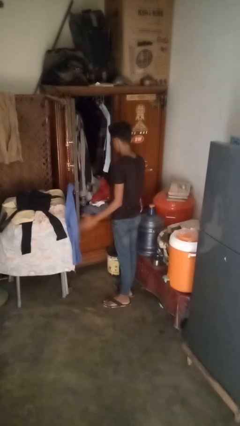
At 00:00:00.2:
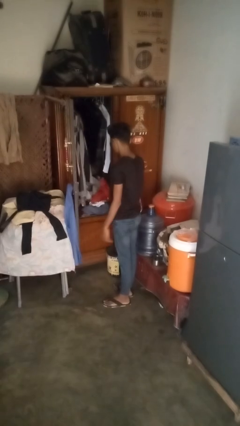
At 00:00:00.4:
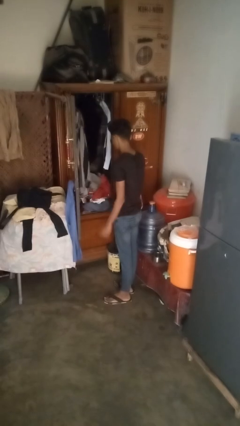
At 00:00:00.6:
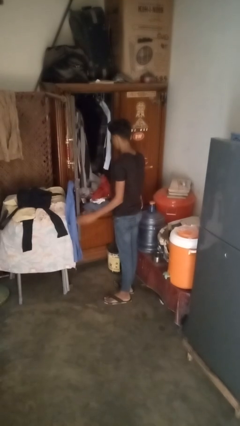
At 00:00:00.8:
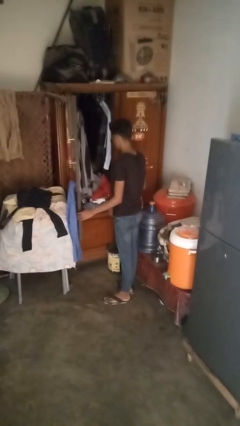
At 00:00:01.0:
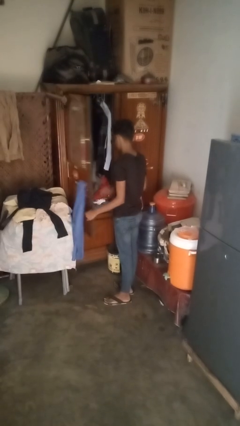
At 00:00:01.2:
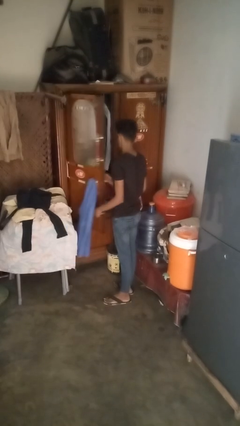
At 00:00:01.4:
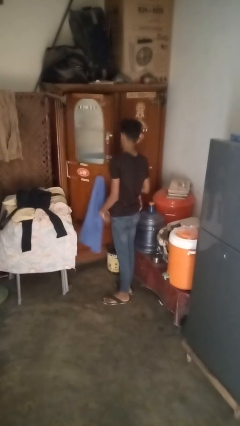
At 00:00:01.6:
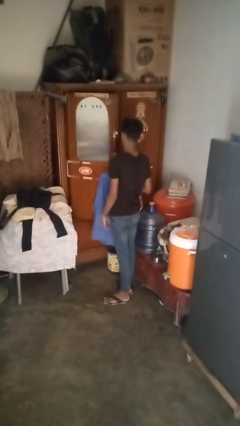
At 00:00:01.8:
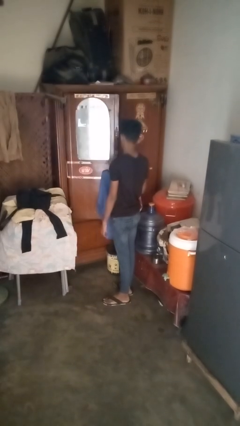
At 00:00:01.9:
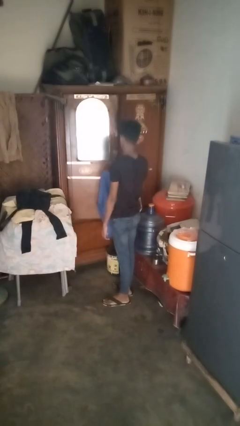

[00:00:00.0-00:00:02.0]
person closes dresser drawer

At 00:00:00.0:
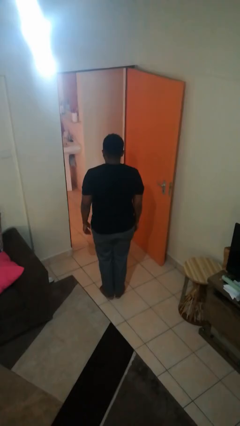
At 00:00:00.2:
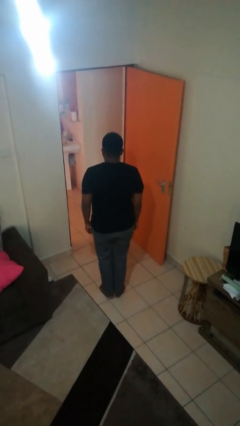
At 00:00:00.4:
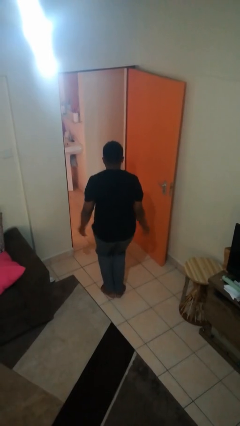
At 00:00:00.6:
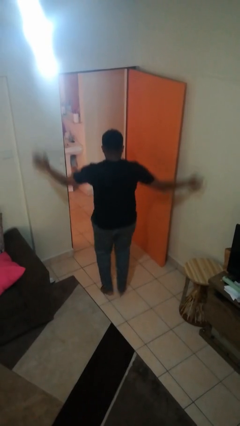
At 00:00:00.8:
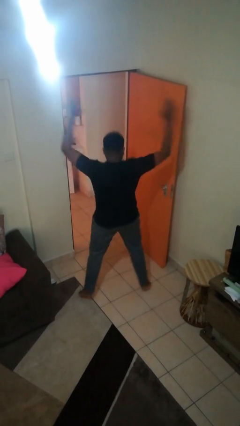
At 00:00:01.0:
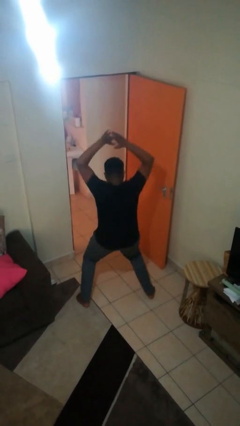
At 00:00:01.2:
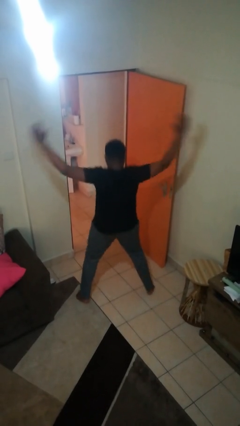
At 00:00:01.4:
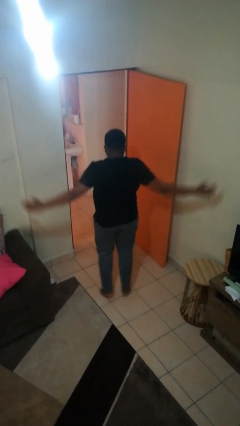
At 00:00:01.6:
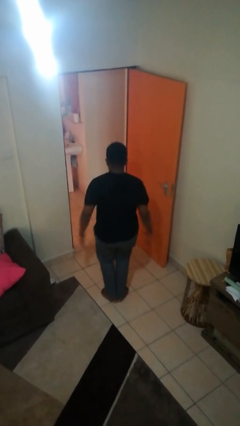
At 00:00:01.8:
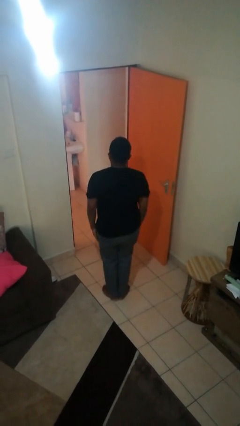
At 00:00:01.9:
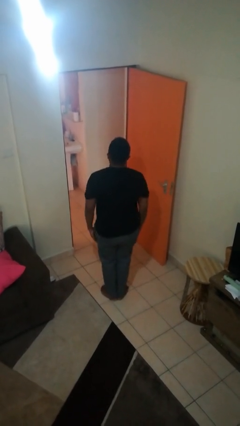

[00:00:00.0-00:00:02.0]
person exercises with jumping jacks

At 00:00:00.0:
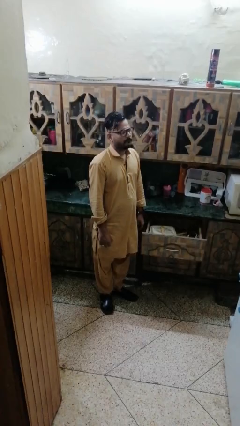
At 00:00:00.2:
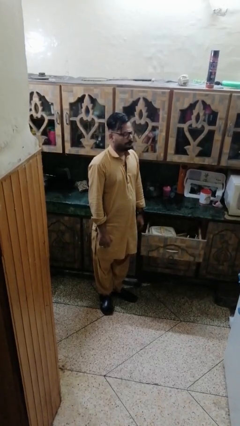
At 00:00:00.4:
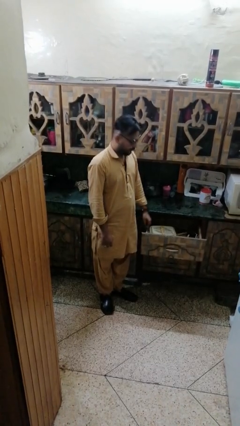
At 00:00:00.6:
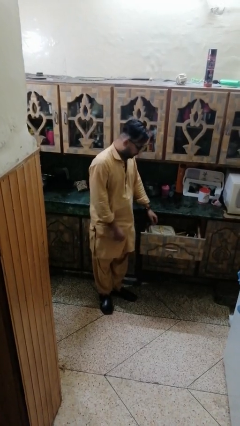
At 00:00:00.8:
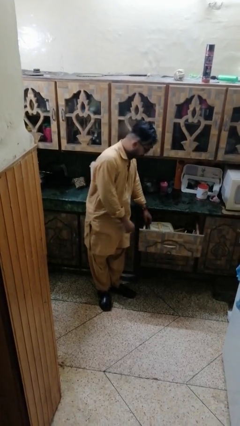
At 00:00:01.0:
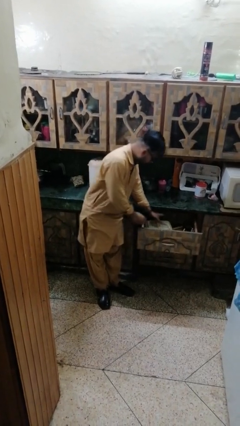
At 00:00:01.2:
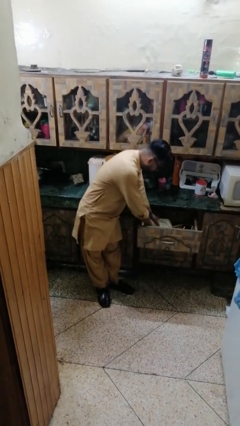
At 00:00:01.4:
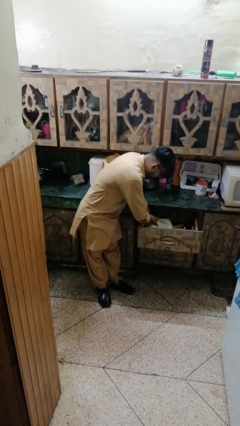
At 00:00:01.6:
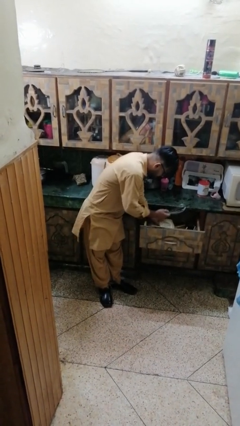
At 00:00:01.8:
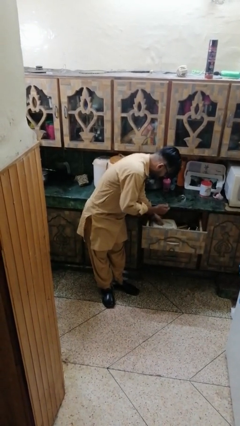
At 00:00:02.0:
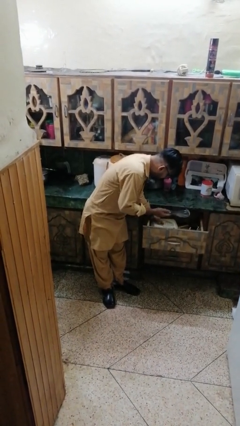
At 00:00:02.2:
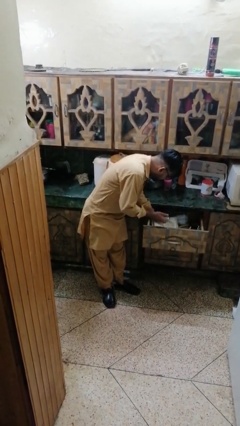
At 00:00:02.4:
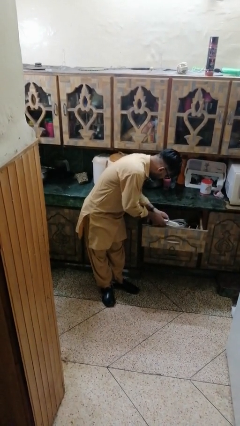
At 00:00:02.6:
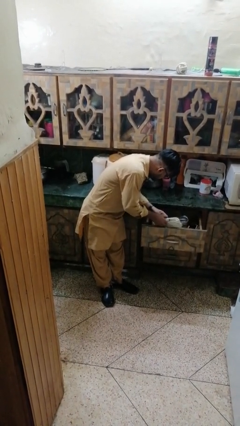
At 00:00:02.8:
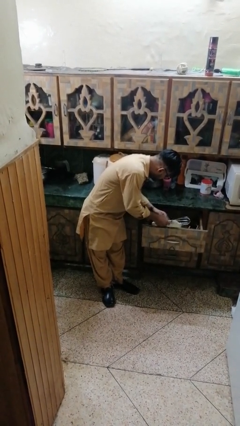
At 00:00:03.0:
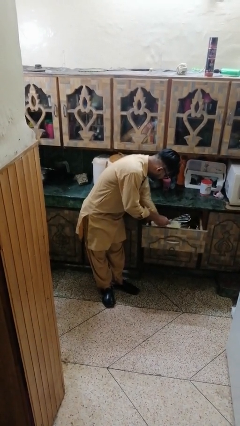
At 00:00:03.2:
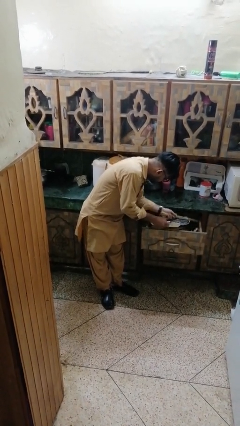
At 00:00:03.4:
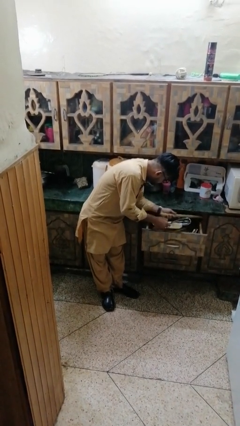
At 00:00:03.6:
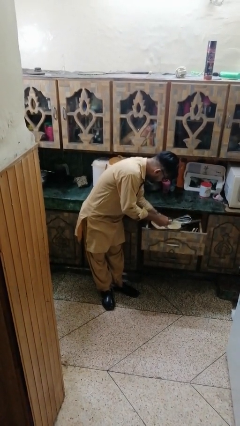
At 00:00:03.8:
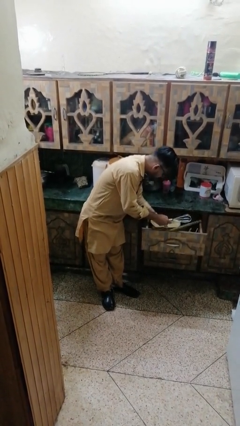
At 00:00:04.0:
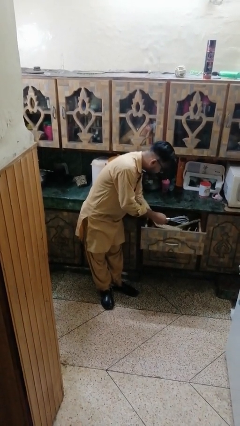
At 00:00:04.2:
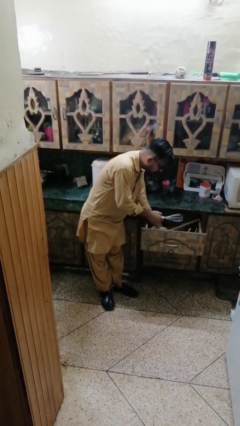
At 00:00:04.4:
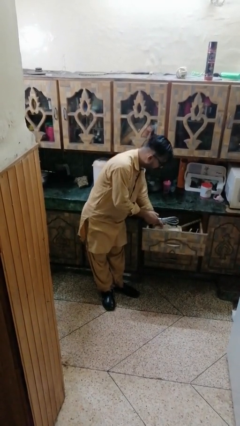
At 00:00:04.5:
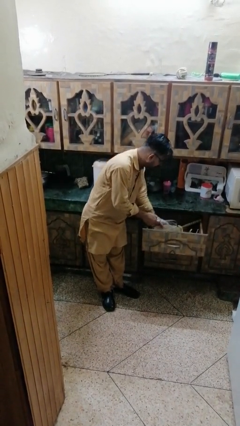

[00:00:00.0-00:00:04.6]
person searches in kitchen drawer

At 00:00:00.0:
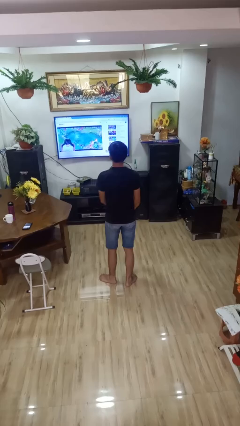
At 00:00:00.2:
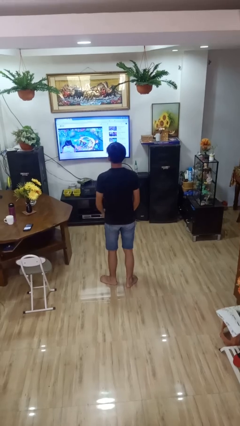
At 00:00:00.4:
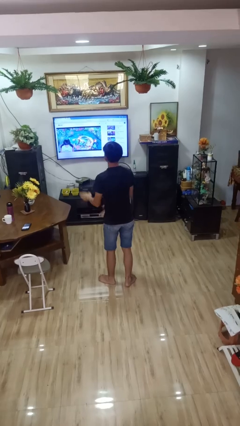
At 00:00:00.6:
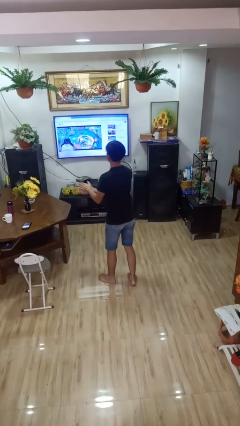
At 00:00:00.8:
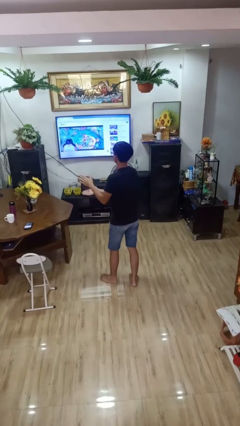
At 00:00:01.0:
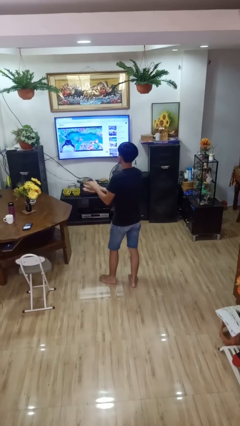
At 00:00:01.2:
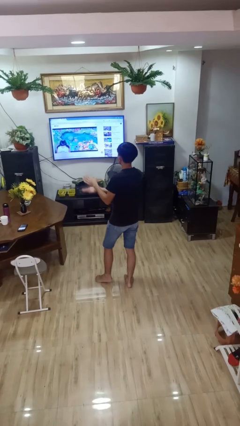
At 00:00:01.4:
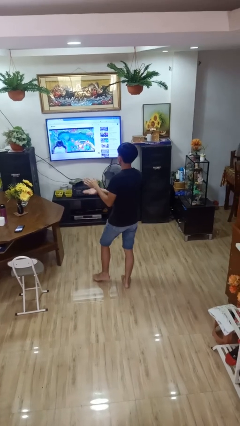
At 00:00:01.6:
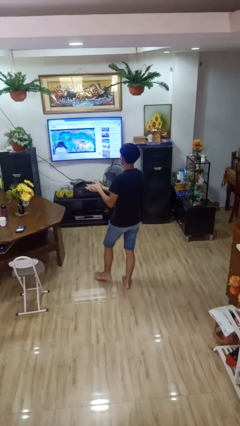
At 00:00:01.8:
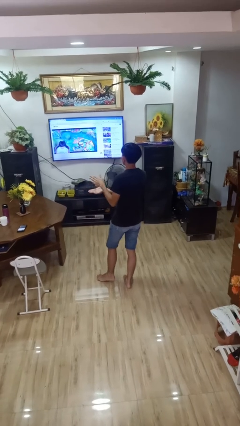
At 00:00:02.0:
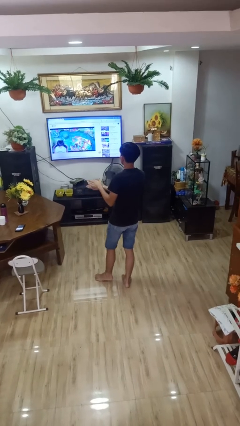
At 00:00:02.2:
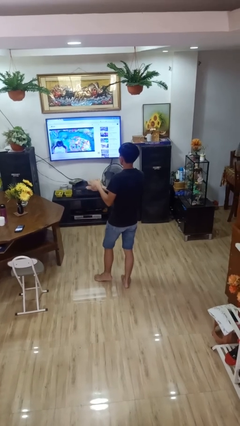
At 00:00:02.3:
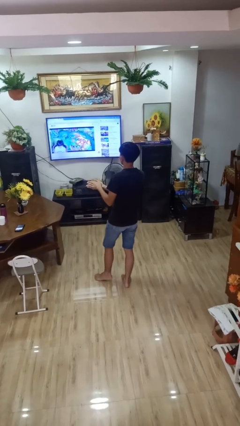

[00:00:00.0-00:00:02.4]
person claps hands

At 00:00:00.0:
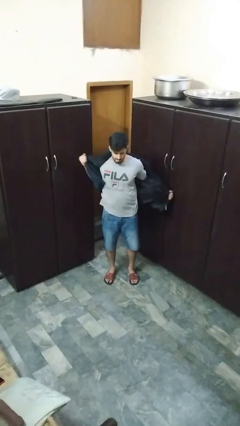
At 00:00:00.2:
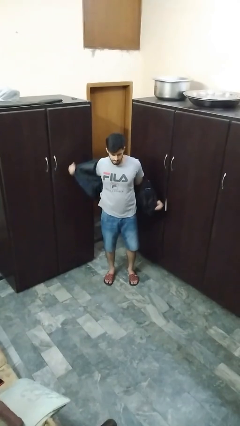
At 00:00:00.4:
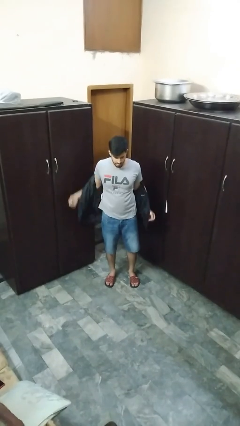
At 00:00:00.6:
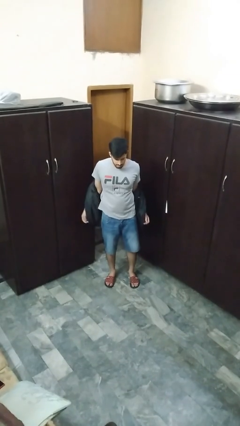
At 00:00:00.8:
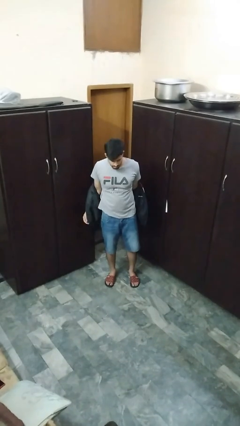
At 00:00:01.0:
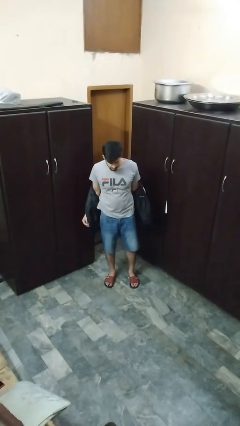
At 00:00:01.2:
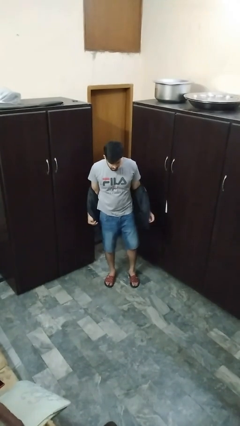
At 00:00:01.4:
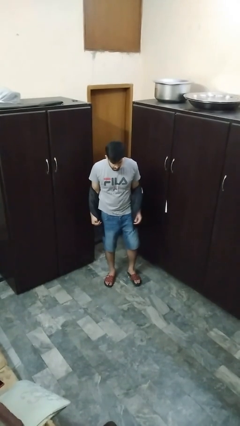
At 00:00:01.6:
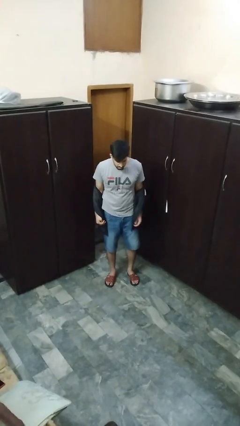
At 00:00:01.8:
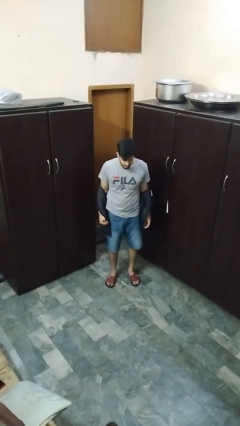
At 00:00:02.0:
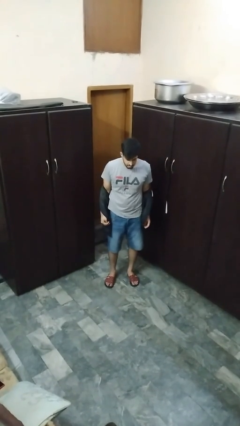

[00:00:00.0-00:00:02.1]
person takes off jacket

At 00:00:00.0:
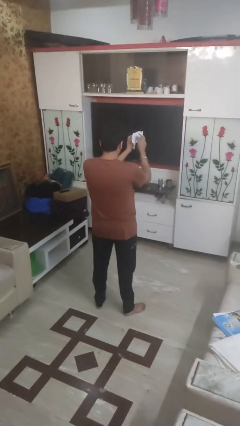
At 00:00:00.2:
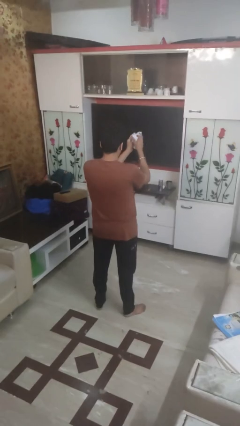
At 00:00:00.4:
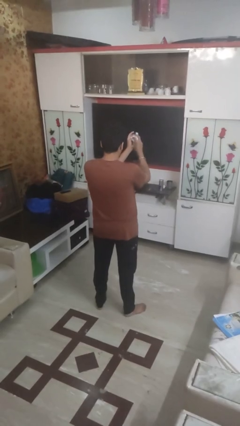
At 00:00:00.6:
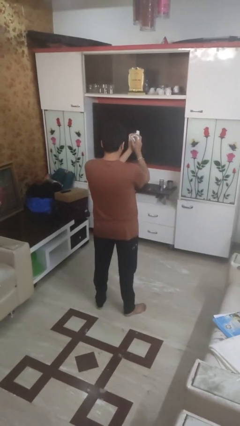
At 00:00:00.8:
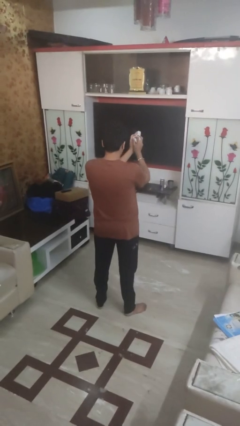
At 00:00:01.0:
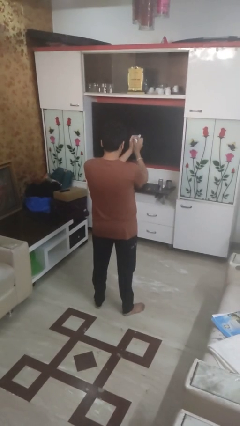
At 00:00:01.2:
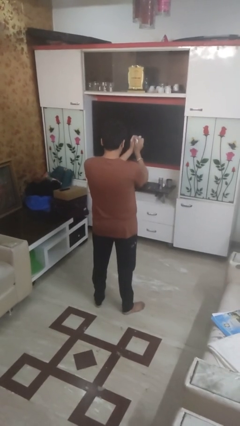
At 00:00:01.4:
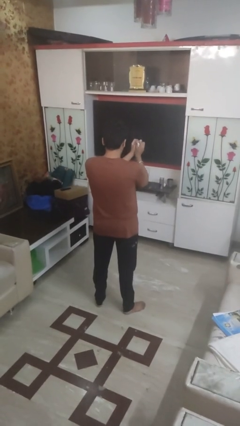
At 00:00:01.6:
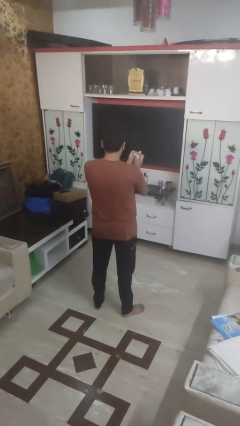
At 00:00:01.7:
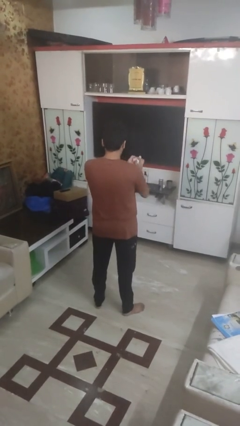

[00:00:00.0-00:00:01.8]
person crumples paper

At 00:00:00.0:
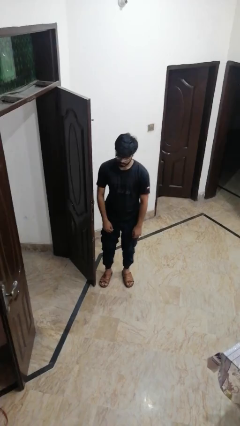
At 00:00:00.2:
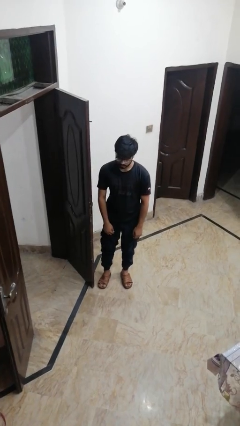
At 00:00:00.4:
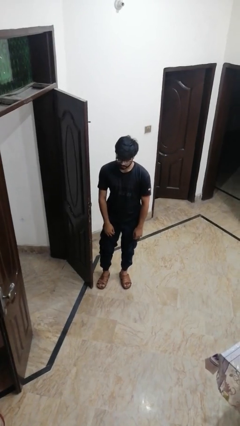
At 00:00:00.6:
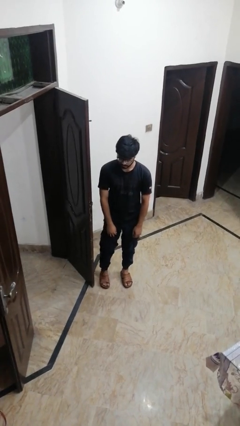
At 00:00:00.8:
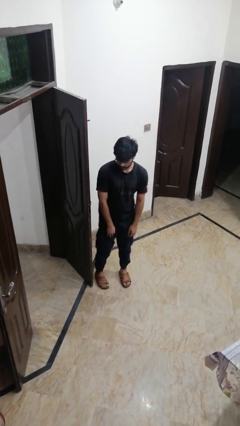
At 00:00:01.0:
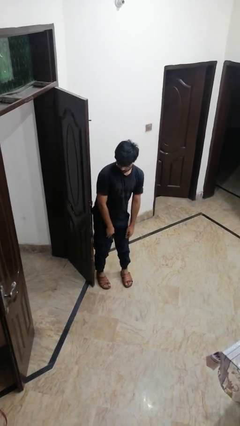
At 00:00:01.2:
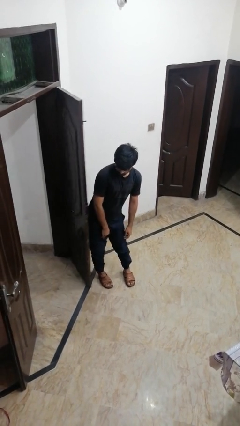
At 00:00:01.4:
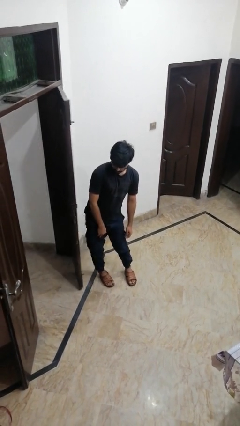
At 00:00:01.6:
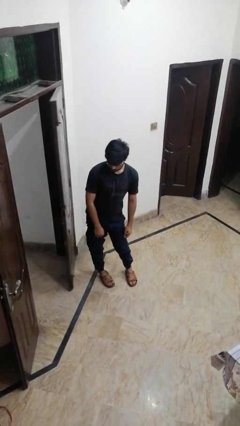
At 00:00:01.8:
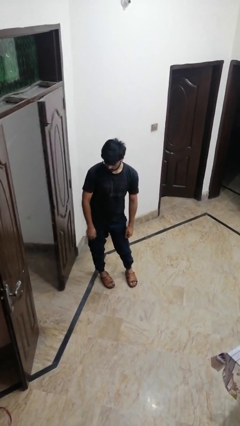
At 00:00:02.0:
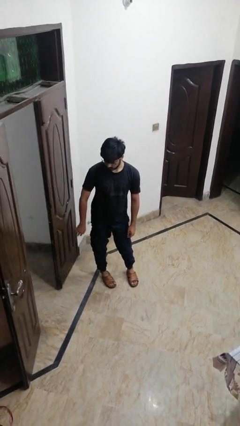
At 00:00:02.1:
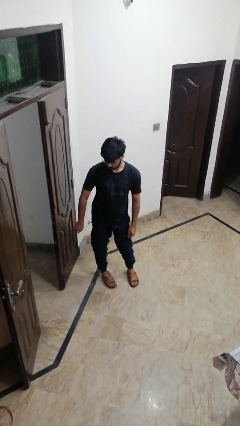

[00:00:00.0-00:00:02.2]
person closes door with hip

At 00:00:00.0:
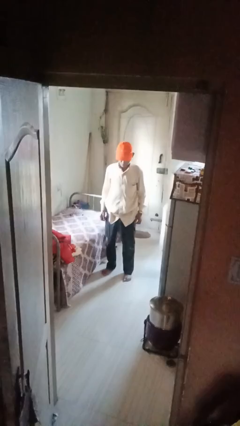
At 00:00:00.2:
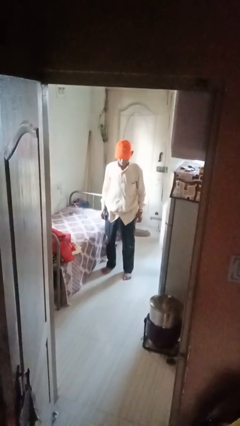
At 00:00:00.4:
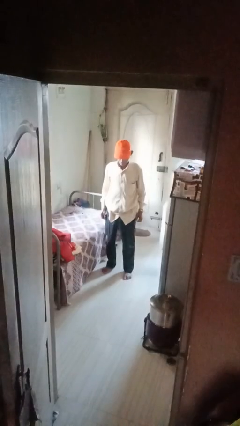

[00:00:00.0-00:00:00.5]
person tucks in shirt
